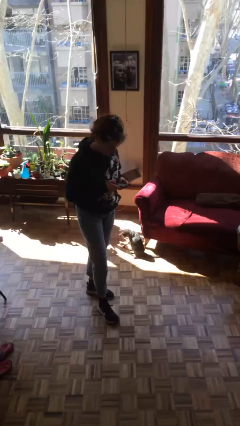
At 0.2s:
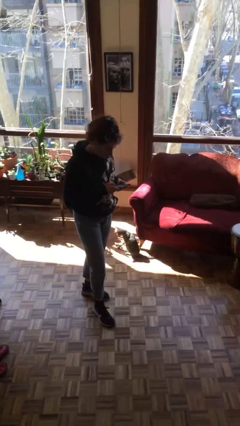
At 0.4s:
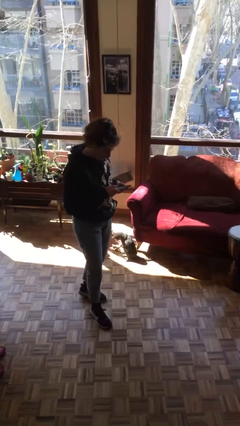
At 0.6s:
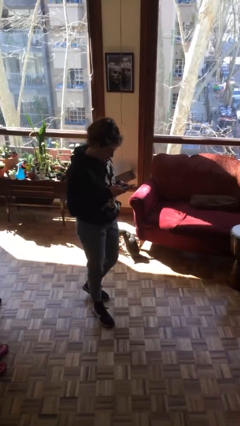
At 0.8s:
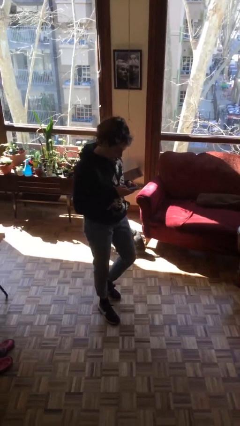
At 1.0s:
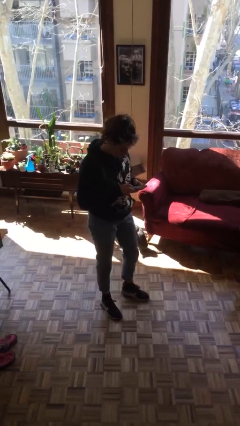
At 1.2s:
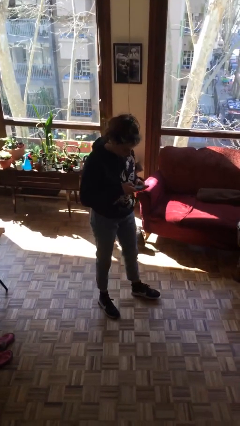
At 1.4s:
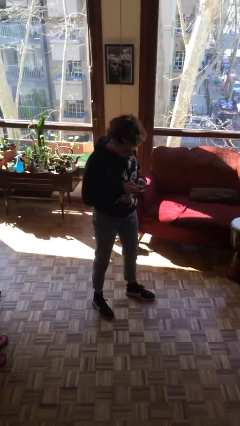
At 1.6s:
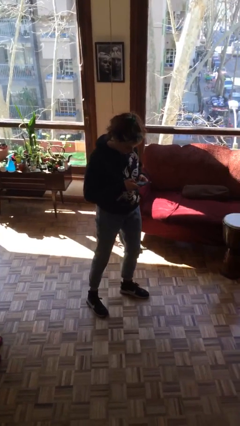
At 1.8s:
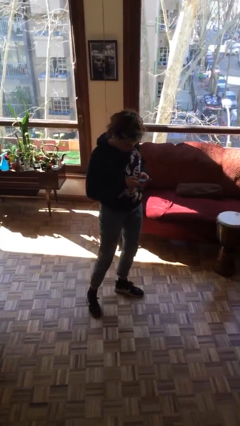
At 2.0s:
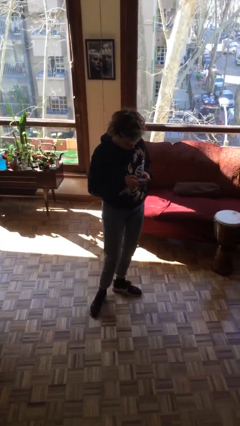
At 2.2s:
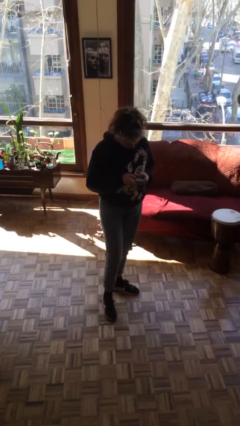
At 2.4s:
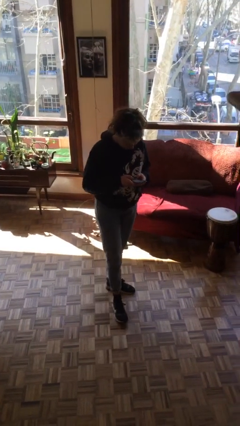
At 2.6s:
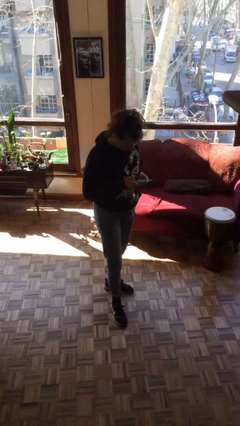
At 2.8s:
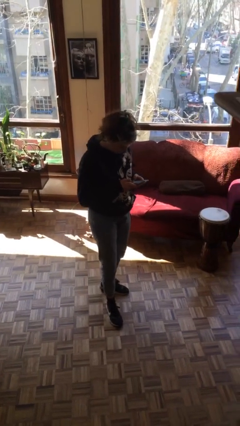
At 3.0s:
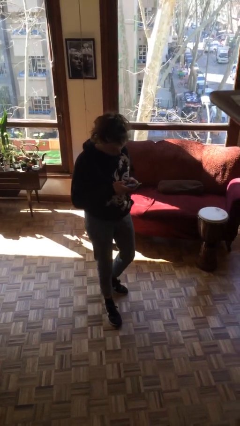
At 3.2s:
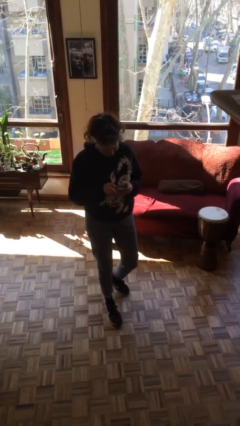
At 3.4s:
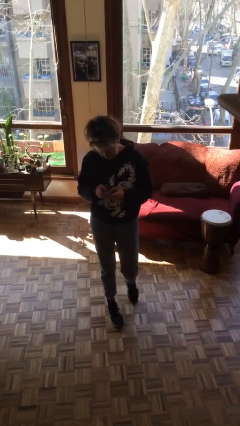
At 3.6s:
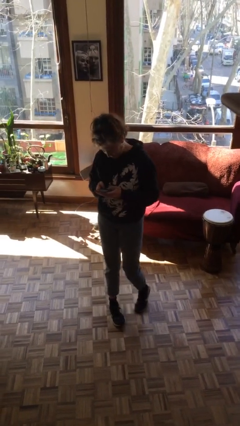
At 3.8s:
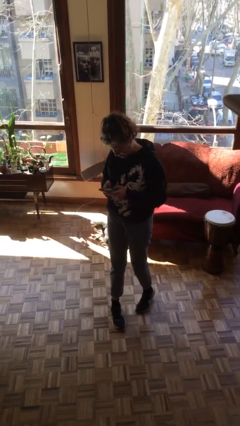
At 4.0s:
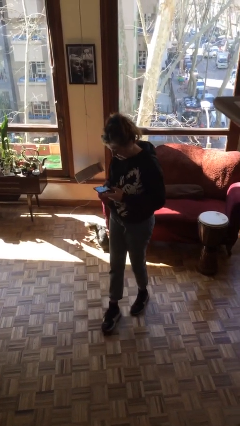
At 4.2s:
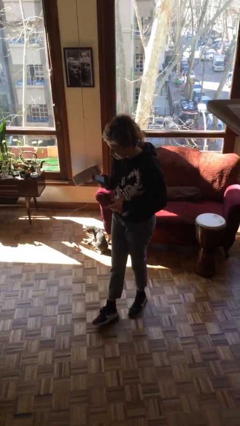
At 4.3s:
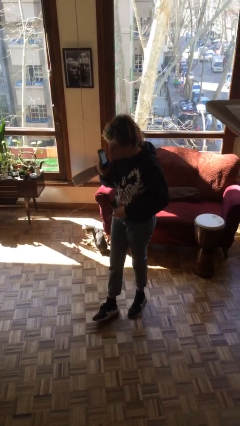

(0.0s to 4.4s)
person texts on phone

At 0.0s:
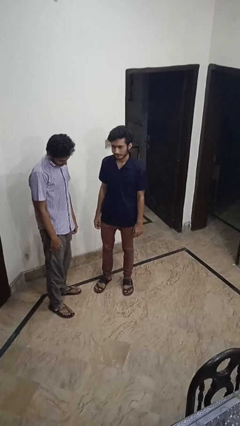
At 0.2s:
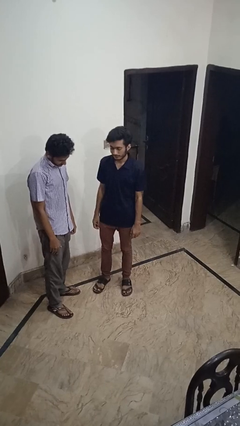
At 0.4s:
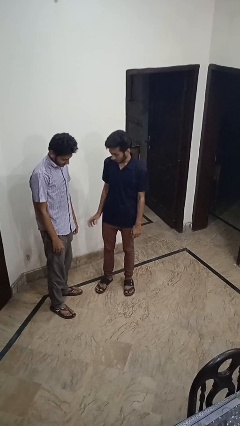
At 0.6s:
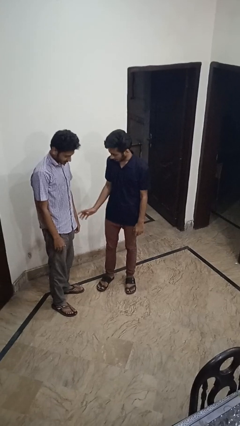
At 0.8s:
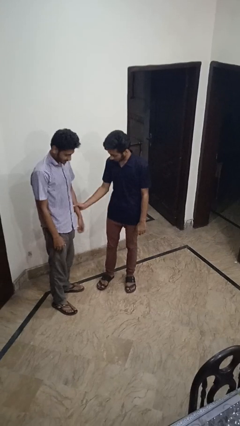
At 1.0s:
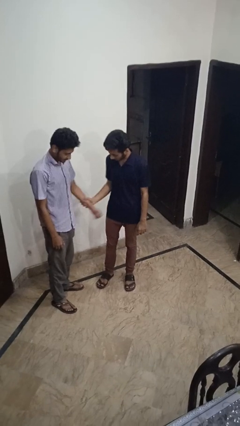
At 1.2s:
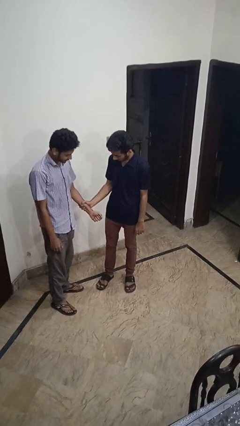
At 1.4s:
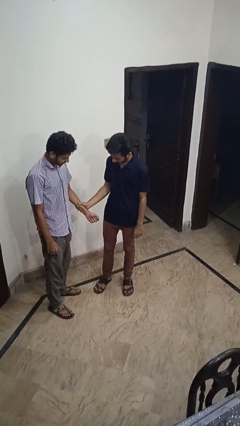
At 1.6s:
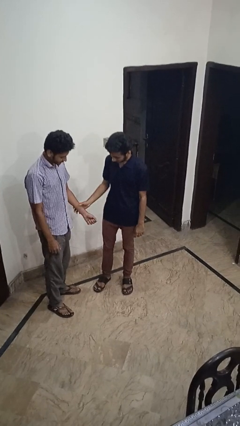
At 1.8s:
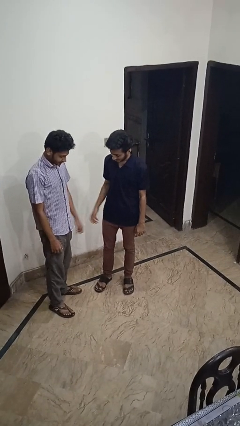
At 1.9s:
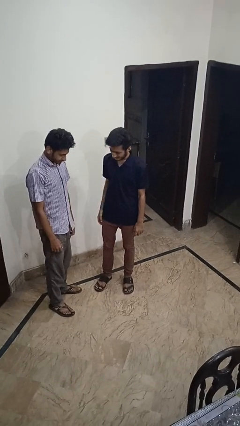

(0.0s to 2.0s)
person grabs person by forearm

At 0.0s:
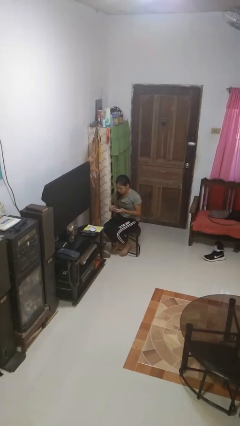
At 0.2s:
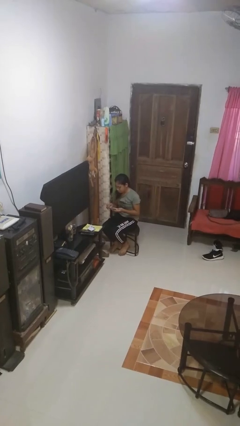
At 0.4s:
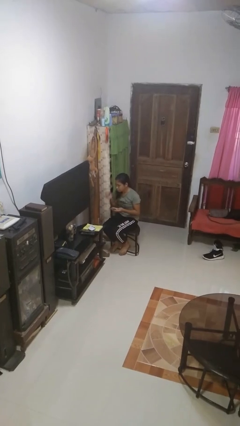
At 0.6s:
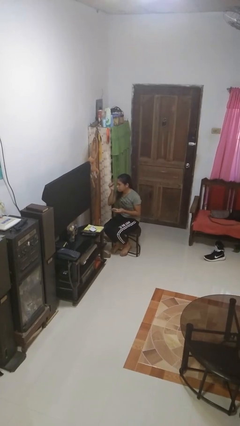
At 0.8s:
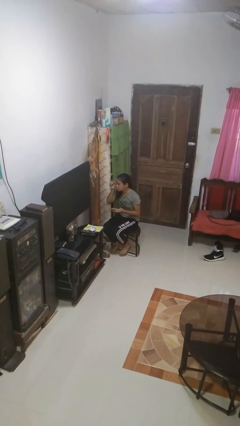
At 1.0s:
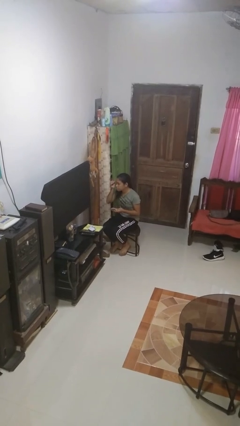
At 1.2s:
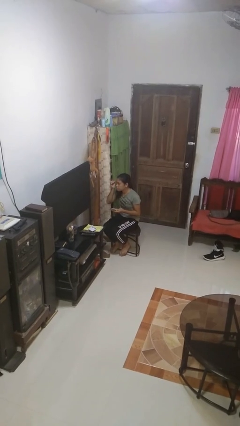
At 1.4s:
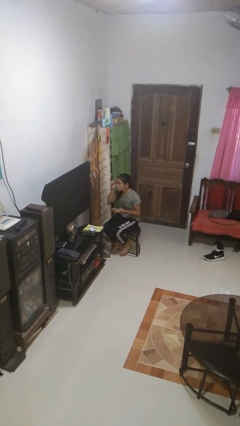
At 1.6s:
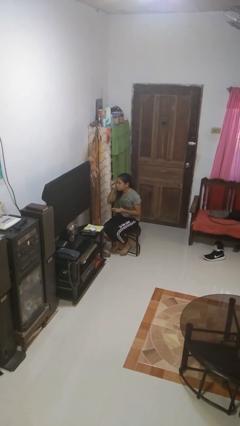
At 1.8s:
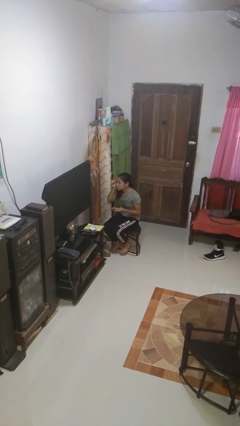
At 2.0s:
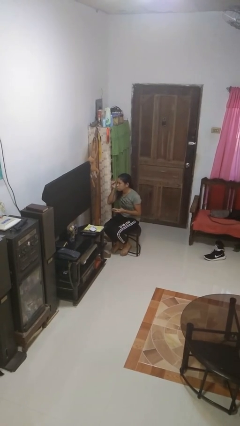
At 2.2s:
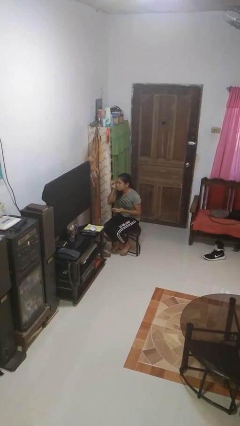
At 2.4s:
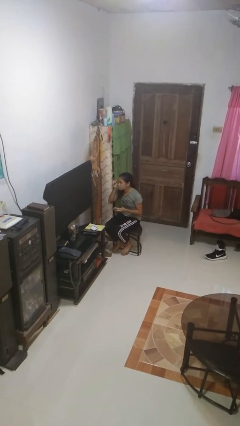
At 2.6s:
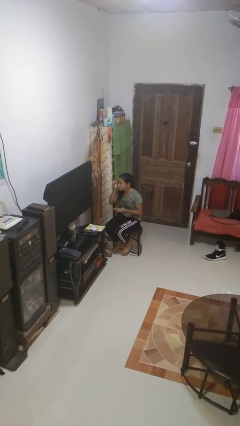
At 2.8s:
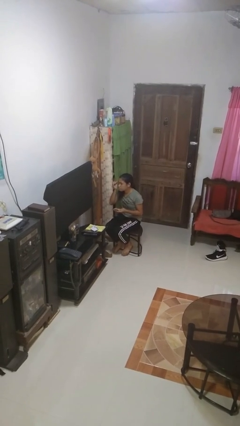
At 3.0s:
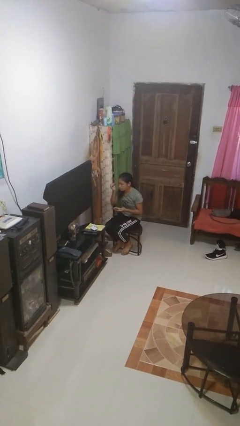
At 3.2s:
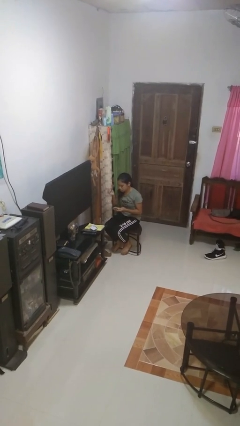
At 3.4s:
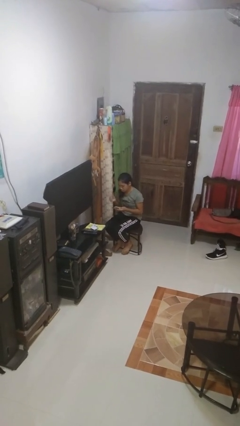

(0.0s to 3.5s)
person applies eye makeup

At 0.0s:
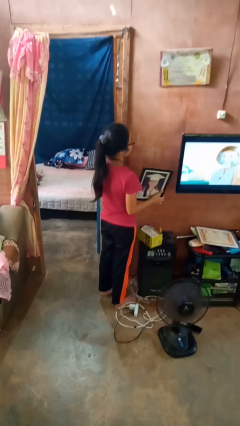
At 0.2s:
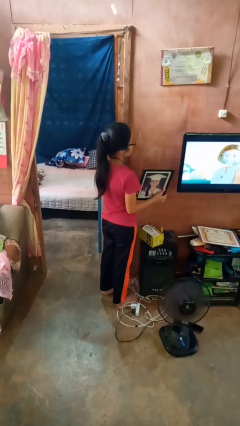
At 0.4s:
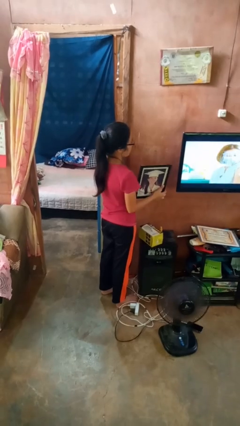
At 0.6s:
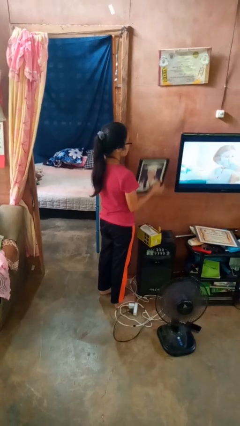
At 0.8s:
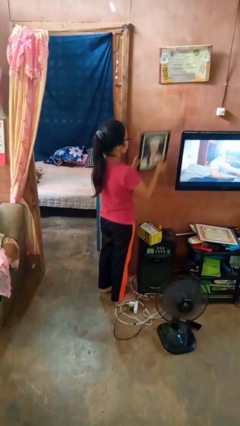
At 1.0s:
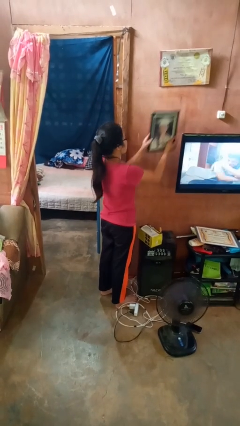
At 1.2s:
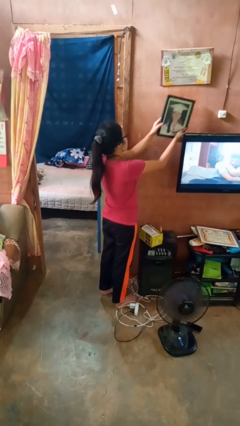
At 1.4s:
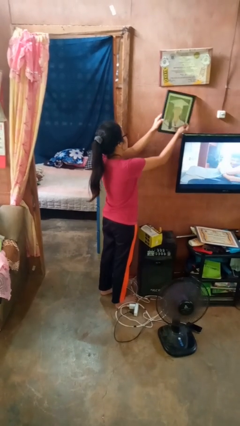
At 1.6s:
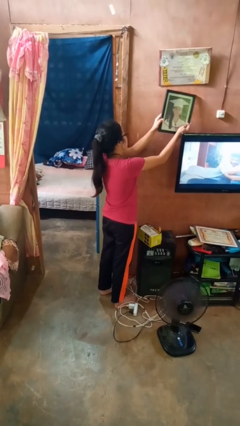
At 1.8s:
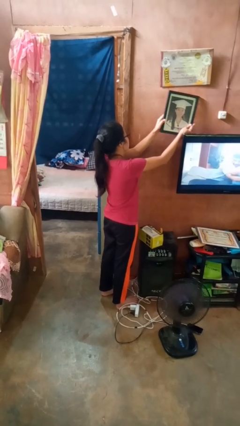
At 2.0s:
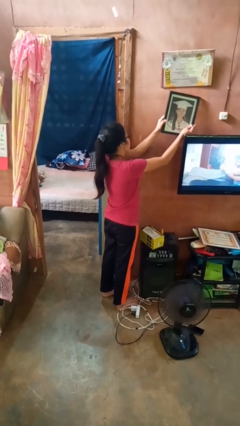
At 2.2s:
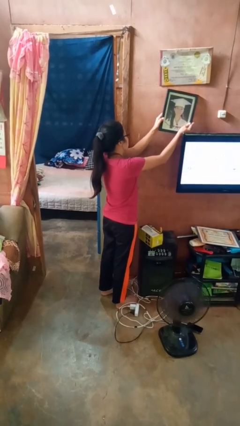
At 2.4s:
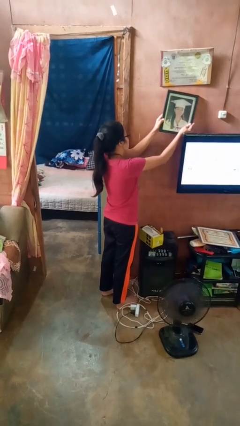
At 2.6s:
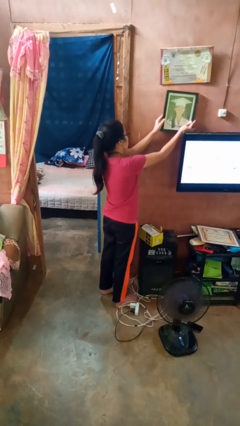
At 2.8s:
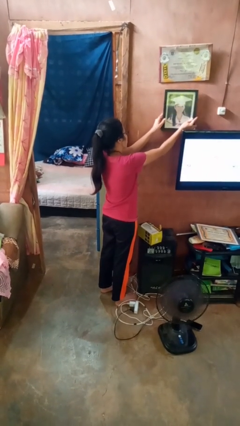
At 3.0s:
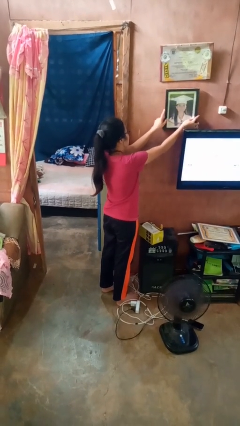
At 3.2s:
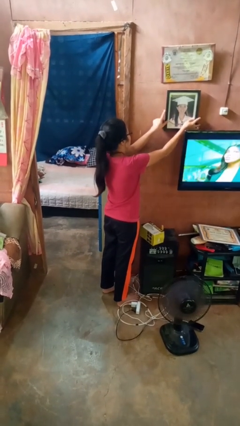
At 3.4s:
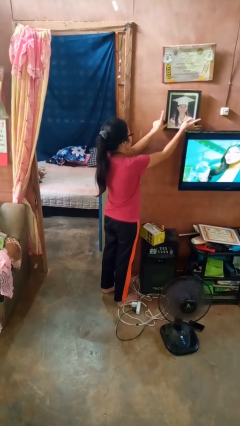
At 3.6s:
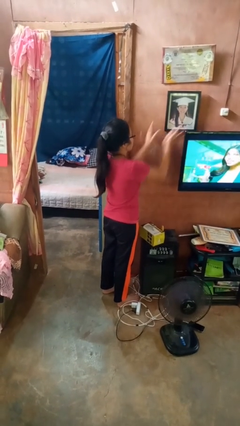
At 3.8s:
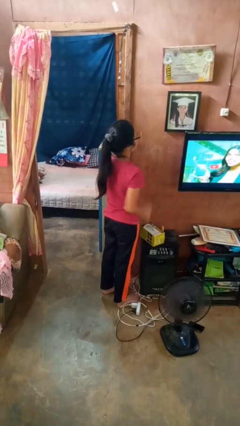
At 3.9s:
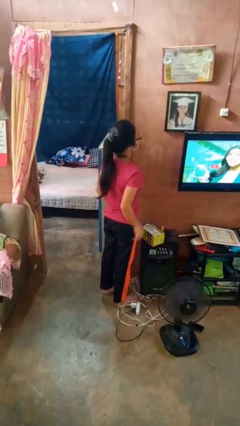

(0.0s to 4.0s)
person puts up picture frame

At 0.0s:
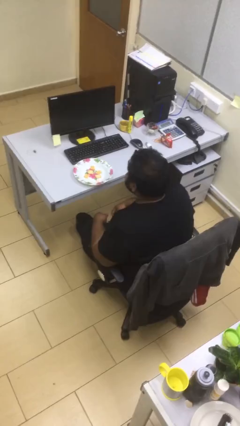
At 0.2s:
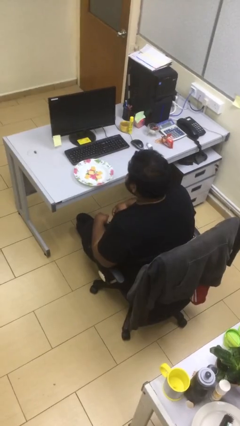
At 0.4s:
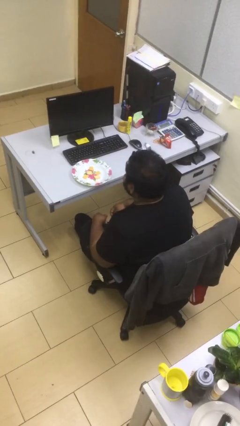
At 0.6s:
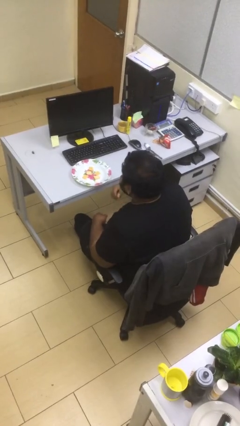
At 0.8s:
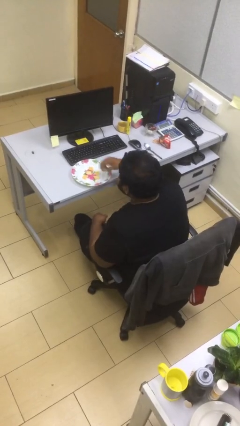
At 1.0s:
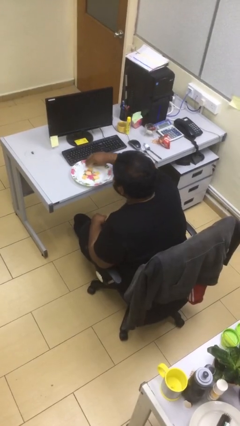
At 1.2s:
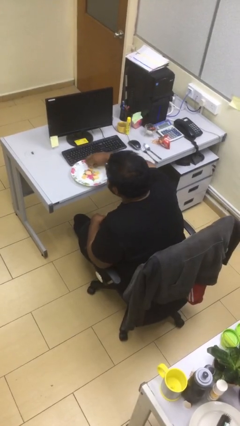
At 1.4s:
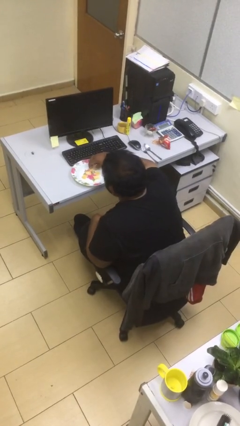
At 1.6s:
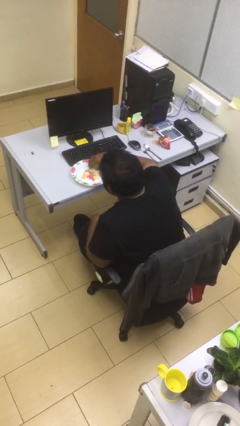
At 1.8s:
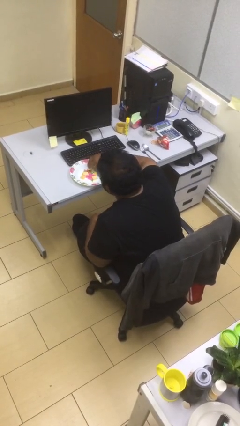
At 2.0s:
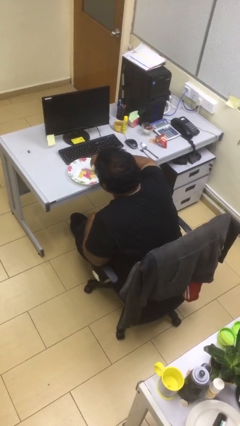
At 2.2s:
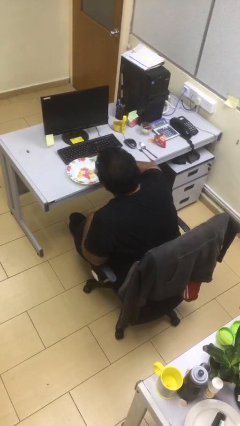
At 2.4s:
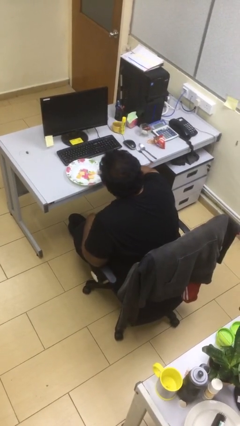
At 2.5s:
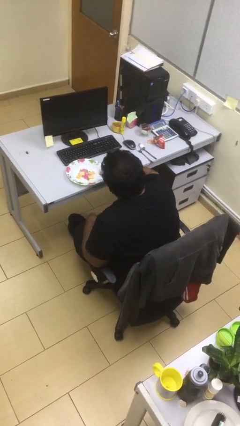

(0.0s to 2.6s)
person eats with hands

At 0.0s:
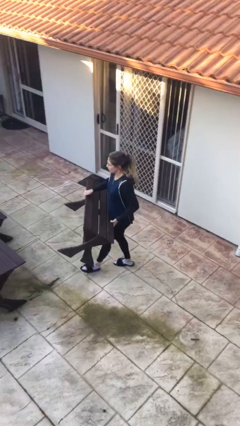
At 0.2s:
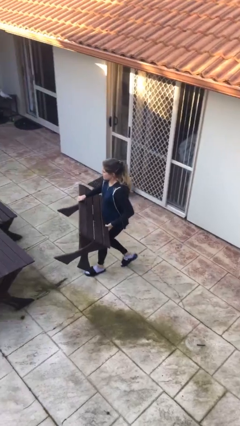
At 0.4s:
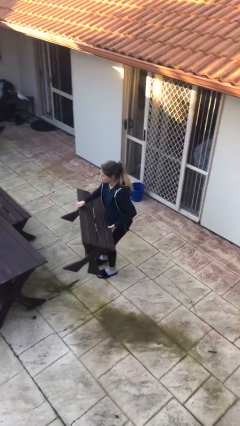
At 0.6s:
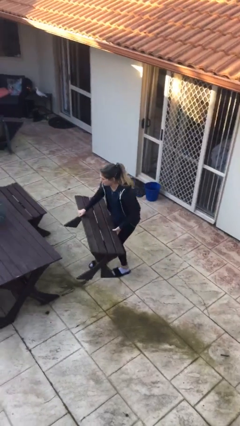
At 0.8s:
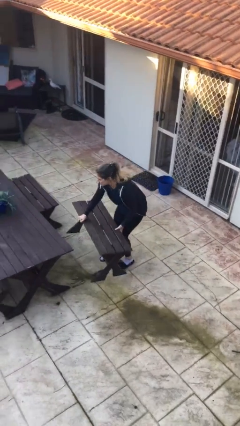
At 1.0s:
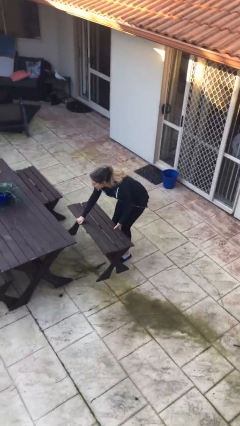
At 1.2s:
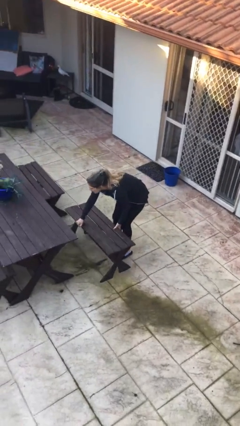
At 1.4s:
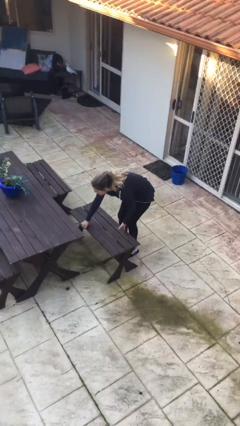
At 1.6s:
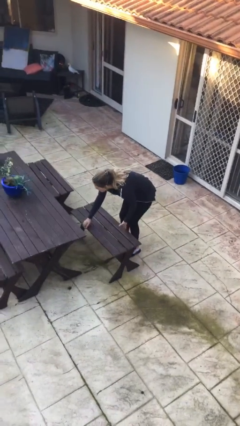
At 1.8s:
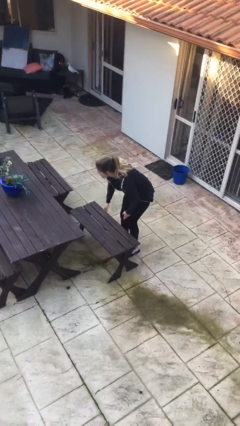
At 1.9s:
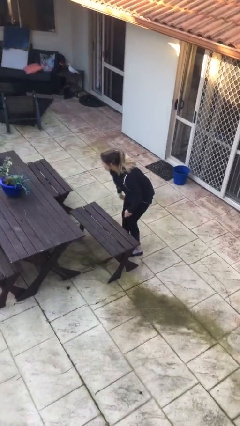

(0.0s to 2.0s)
person puts down object on floor
